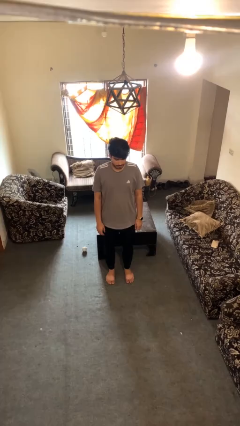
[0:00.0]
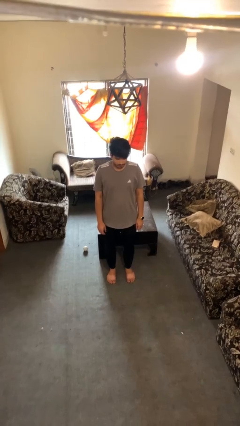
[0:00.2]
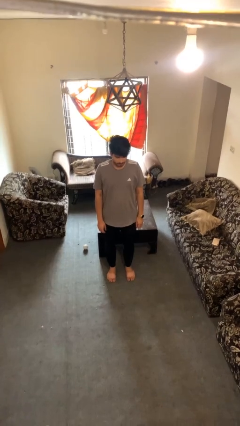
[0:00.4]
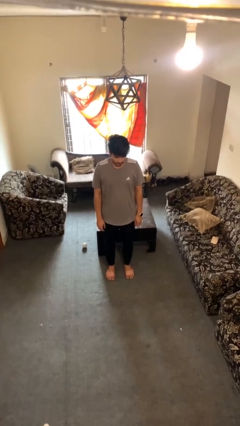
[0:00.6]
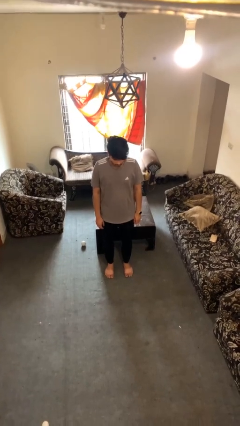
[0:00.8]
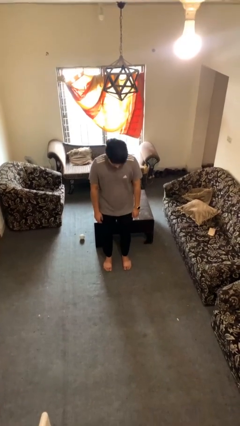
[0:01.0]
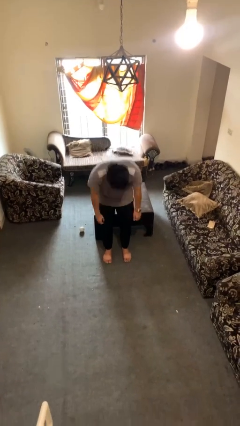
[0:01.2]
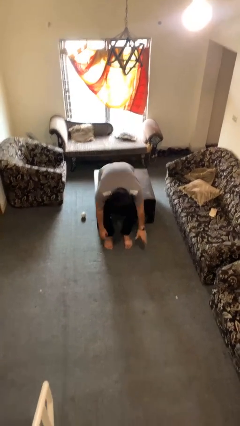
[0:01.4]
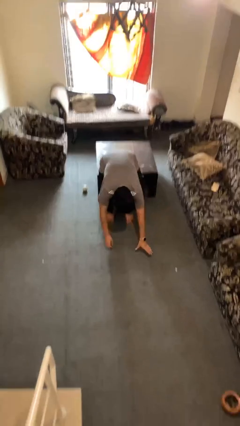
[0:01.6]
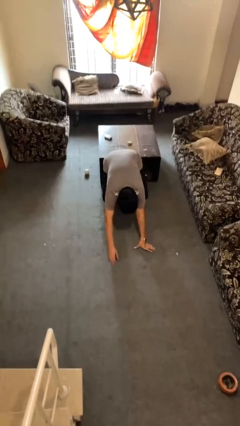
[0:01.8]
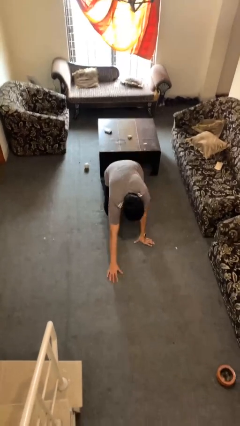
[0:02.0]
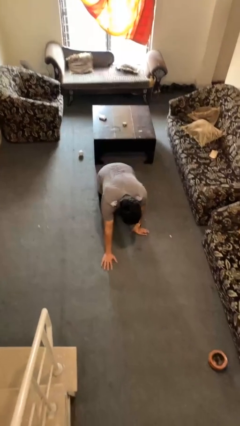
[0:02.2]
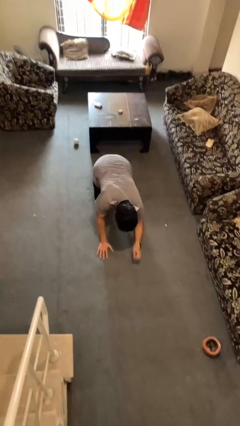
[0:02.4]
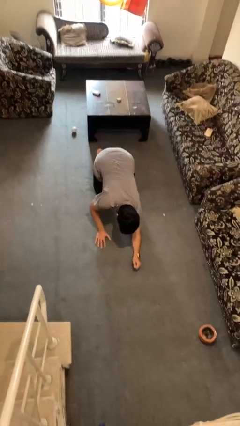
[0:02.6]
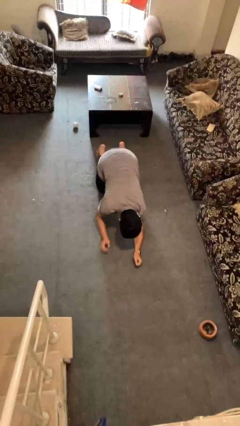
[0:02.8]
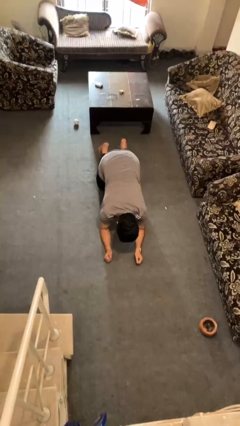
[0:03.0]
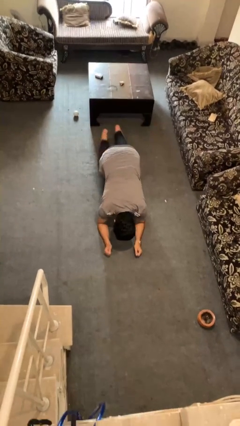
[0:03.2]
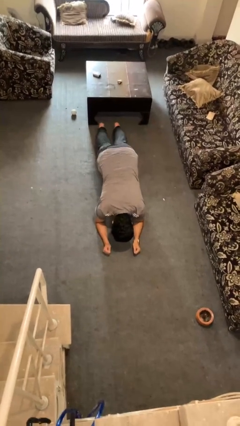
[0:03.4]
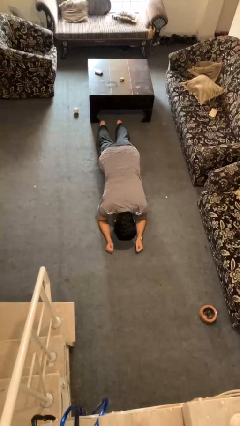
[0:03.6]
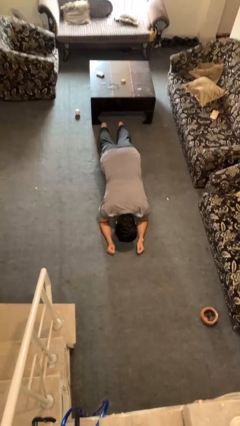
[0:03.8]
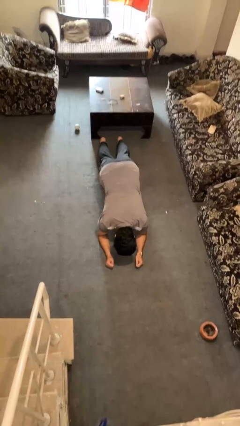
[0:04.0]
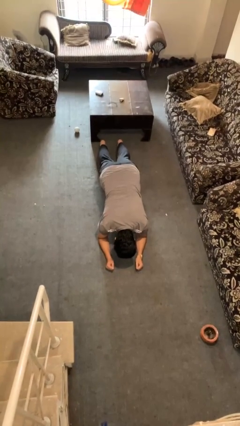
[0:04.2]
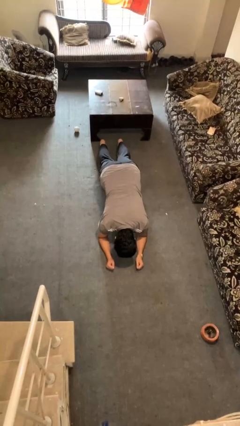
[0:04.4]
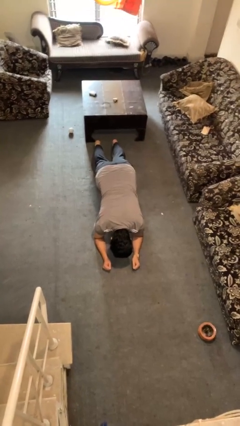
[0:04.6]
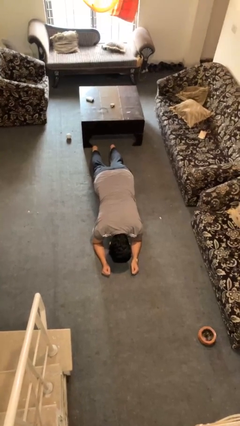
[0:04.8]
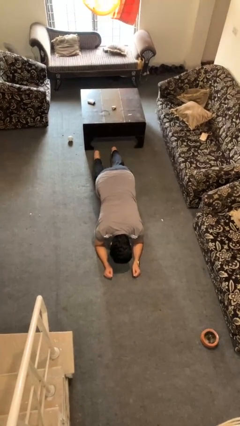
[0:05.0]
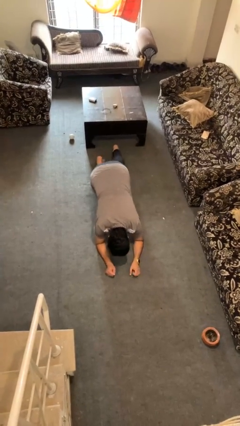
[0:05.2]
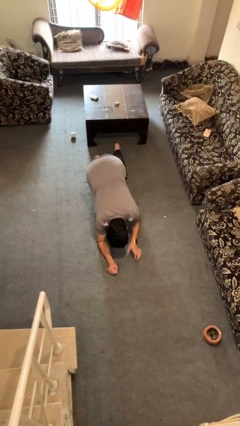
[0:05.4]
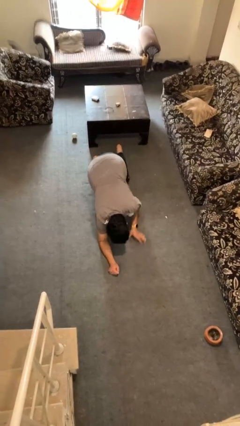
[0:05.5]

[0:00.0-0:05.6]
person exercises with plank

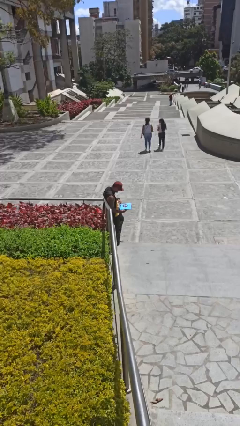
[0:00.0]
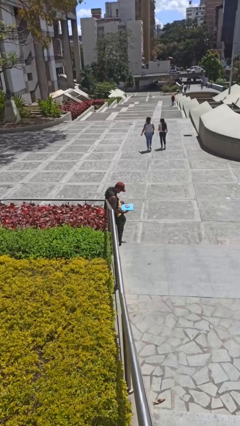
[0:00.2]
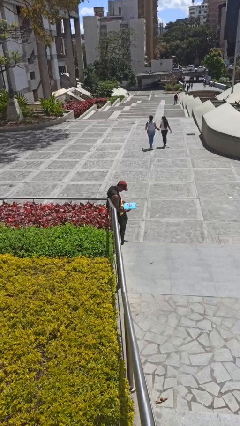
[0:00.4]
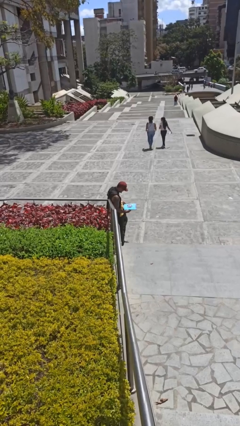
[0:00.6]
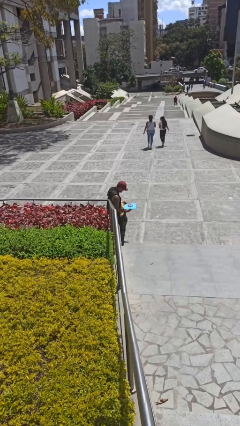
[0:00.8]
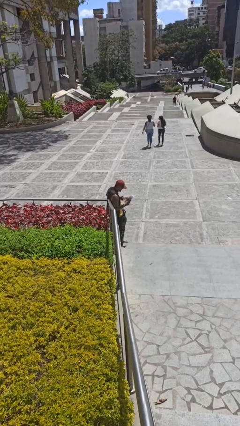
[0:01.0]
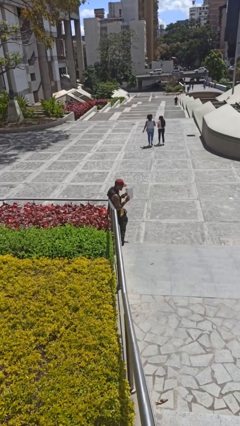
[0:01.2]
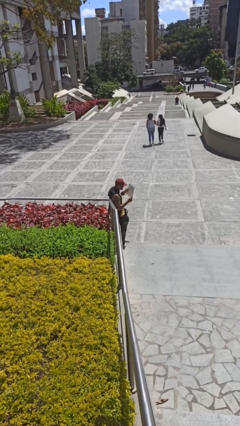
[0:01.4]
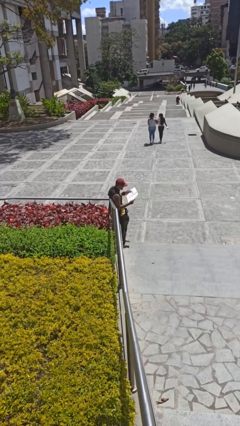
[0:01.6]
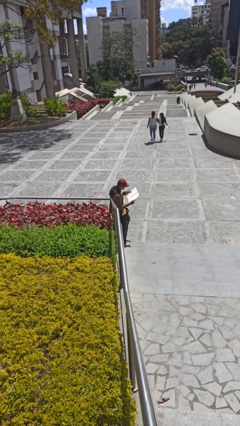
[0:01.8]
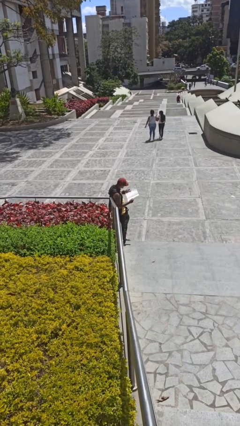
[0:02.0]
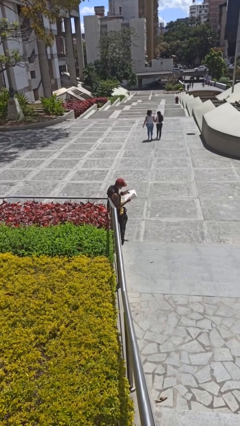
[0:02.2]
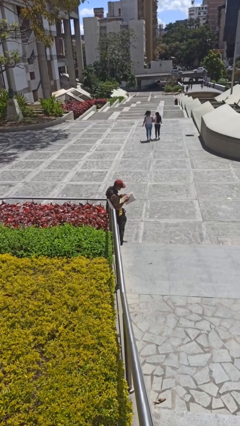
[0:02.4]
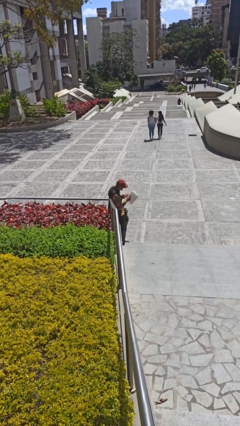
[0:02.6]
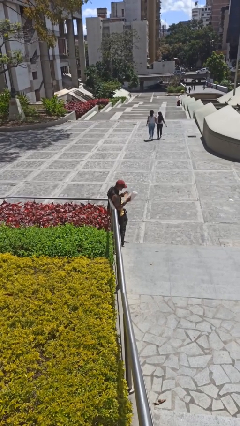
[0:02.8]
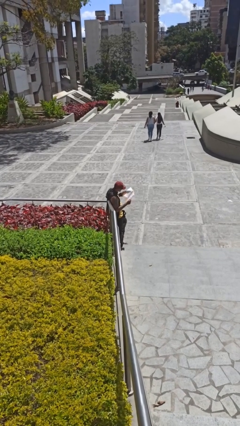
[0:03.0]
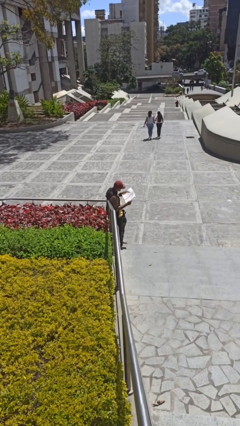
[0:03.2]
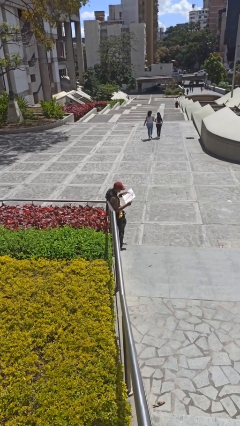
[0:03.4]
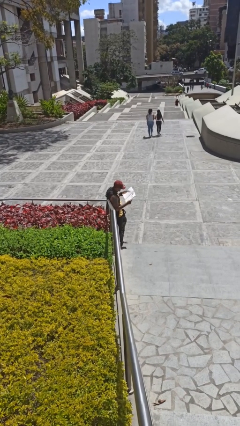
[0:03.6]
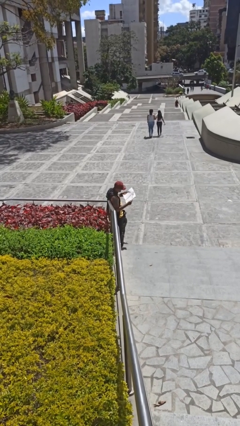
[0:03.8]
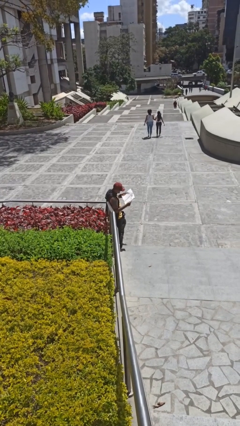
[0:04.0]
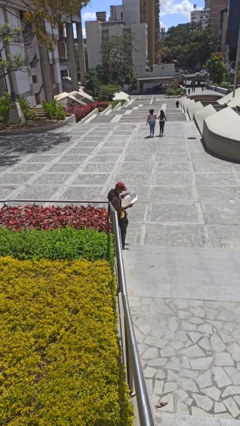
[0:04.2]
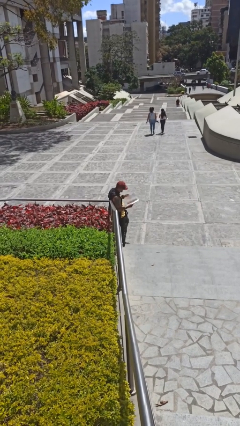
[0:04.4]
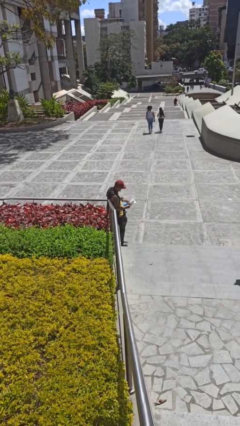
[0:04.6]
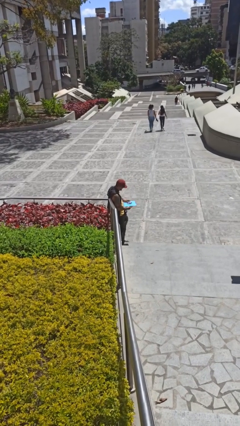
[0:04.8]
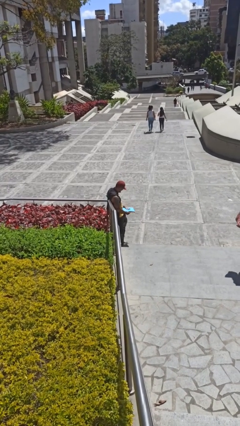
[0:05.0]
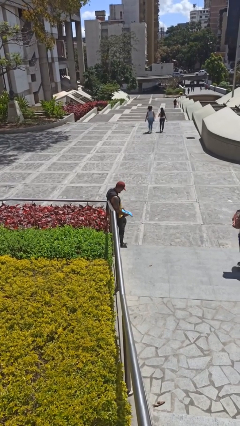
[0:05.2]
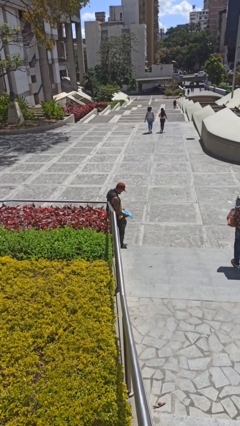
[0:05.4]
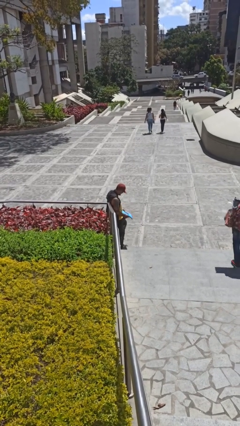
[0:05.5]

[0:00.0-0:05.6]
person reads document

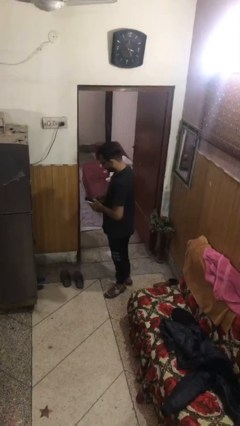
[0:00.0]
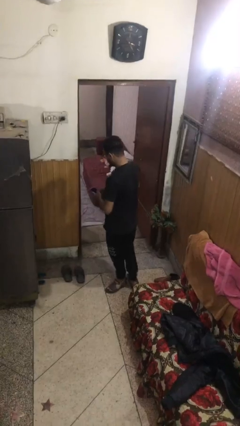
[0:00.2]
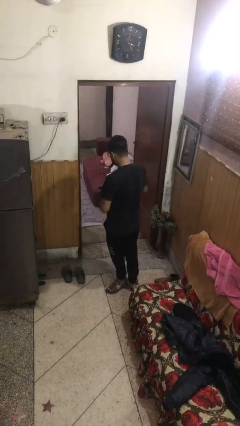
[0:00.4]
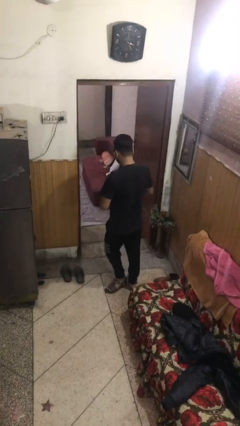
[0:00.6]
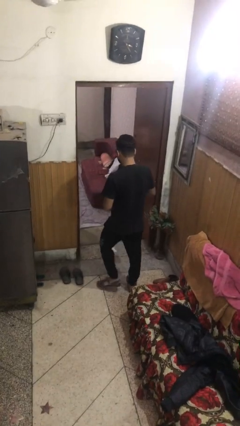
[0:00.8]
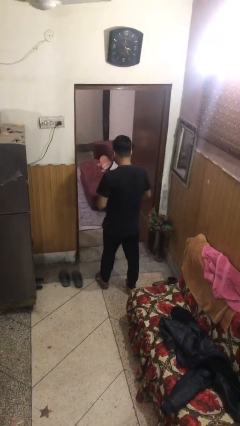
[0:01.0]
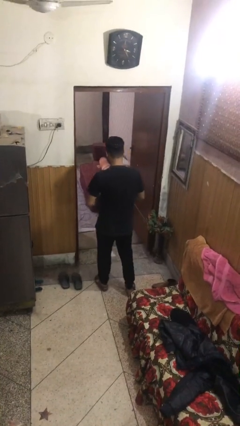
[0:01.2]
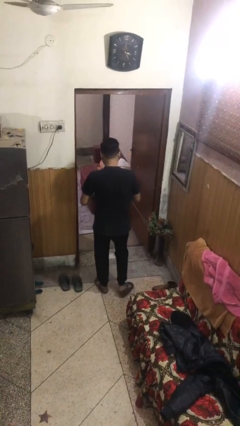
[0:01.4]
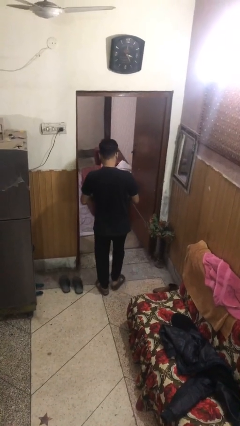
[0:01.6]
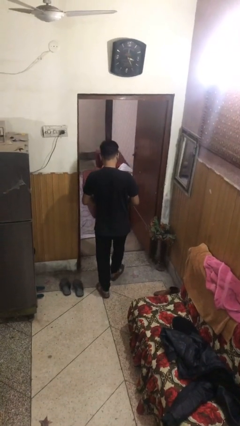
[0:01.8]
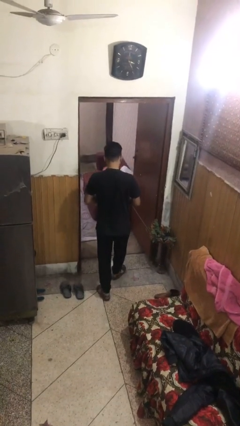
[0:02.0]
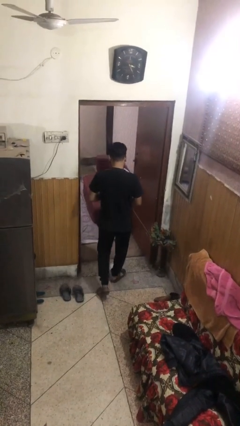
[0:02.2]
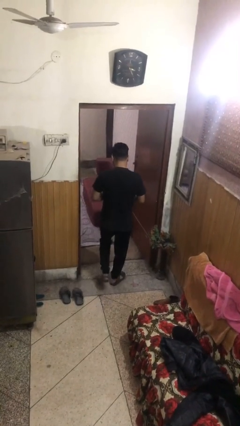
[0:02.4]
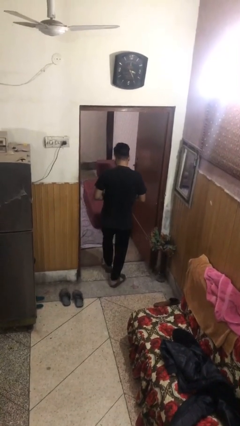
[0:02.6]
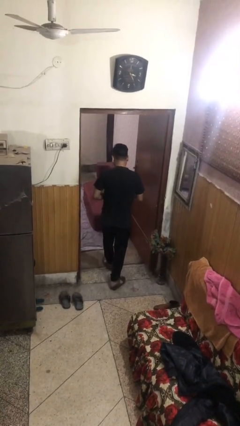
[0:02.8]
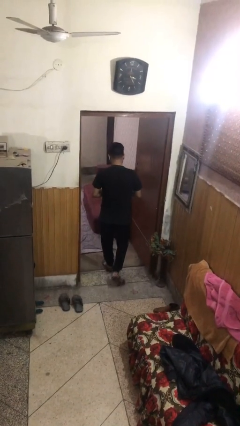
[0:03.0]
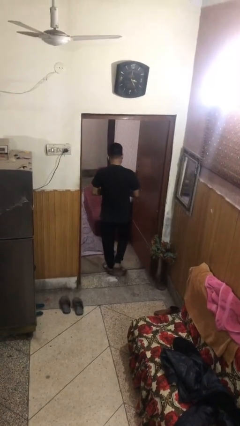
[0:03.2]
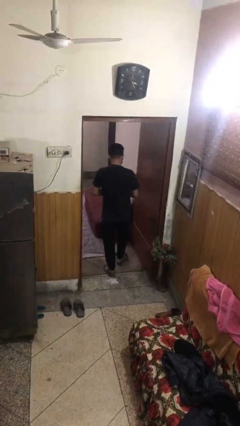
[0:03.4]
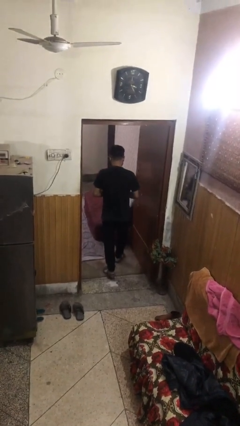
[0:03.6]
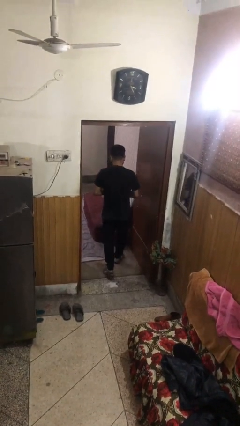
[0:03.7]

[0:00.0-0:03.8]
person exits scene through structure

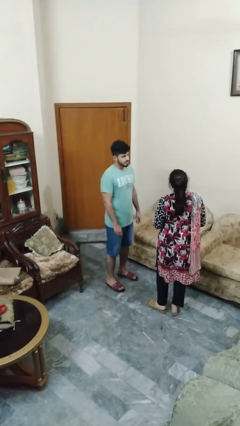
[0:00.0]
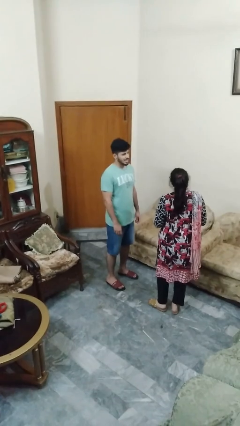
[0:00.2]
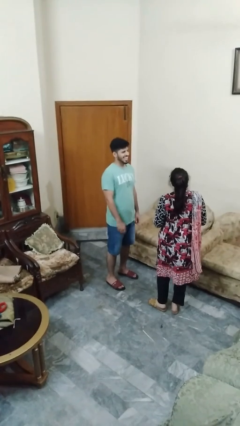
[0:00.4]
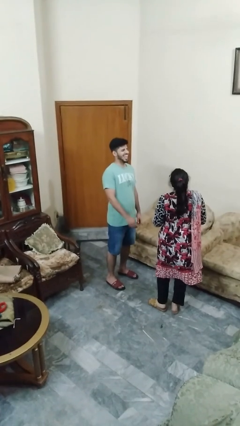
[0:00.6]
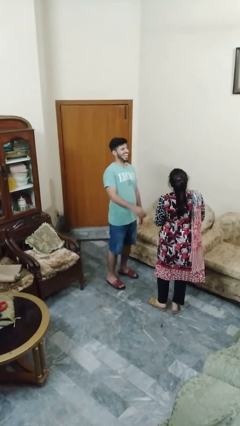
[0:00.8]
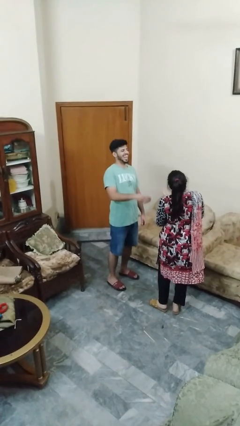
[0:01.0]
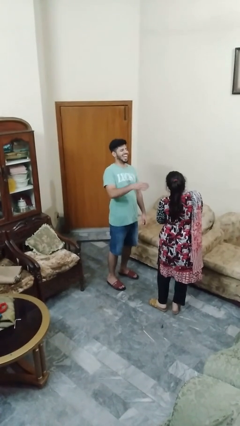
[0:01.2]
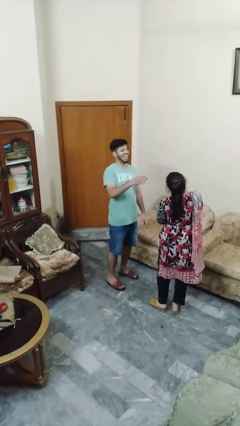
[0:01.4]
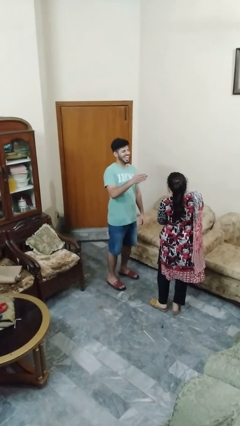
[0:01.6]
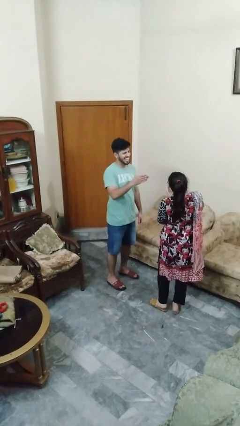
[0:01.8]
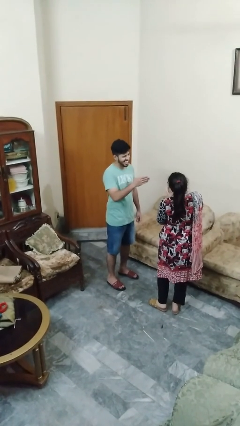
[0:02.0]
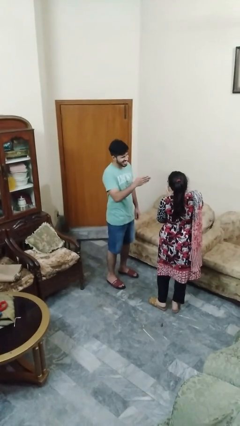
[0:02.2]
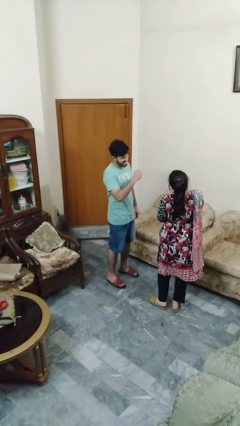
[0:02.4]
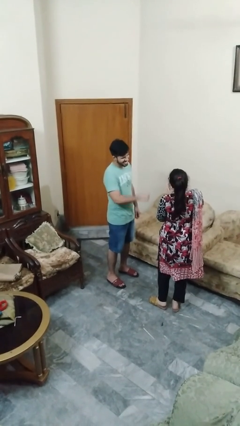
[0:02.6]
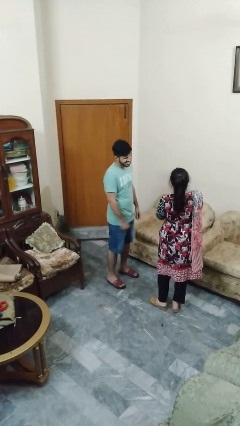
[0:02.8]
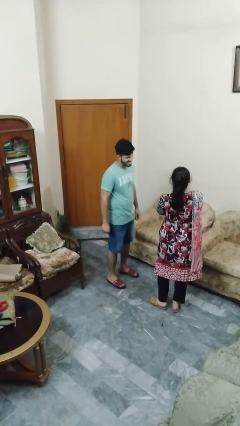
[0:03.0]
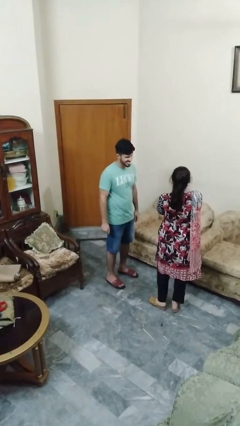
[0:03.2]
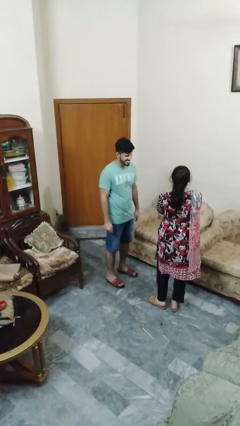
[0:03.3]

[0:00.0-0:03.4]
person laughs with person
